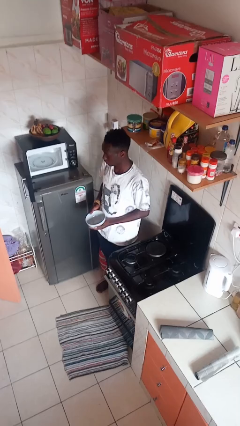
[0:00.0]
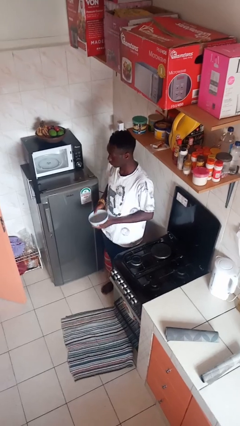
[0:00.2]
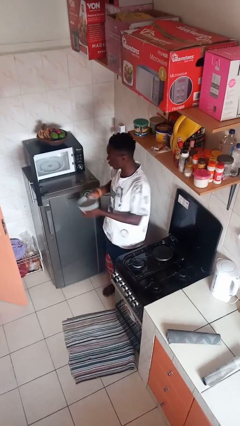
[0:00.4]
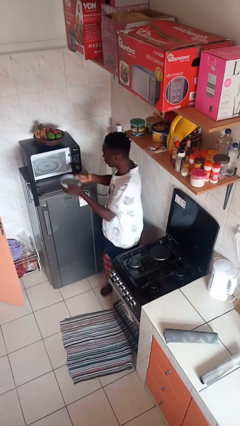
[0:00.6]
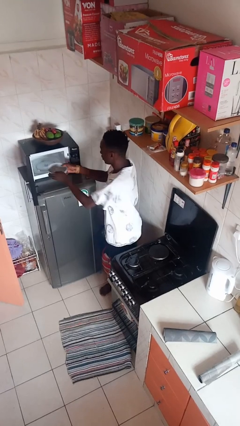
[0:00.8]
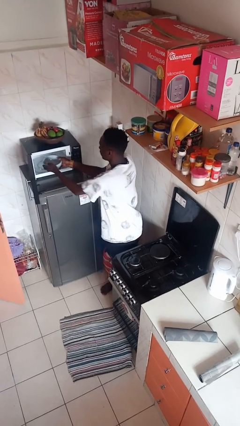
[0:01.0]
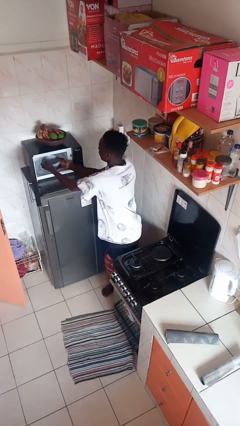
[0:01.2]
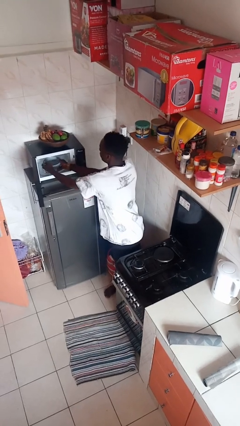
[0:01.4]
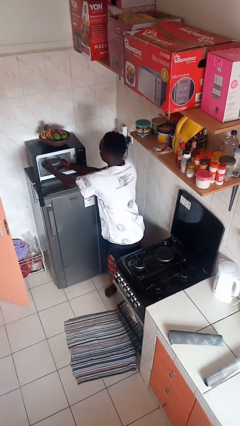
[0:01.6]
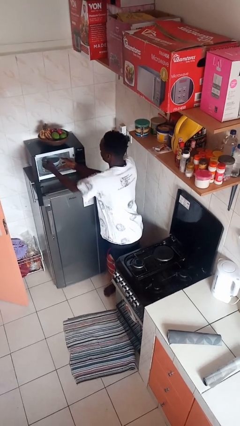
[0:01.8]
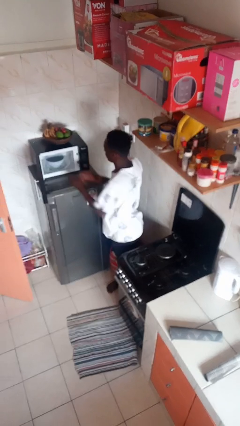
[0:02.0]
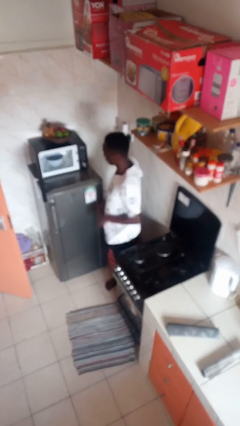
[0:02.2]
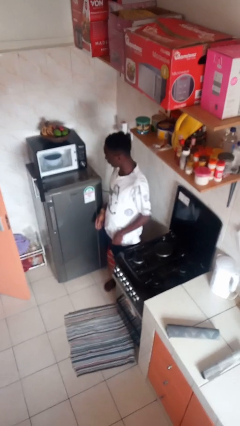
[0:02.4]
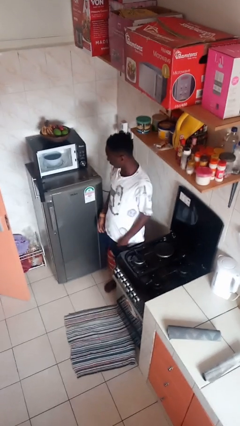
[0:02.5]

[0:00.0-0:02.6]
person puts object into microwave

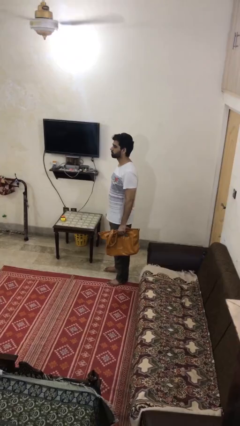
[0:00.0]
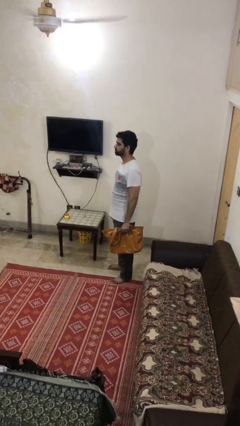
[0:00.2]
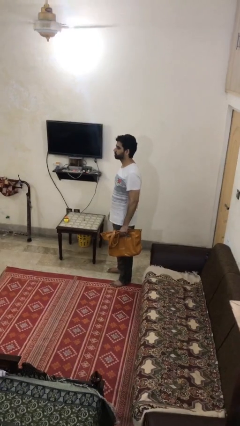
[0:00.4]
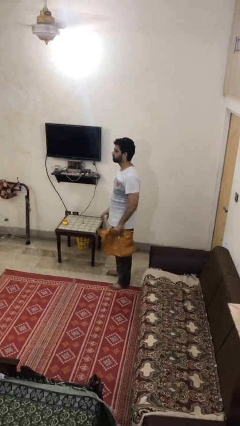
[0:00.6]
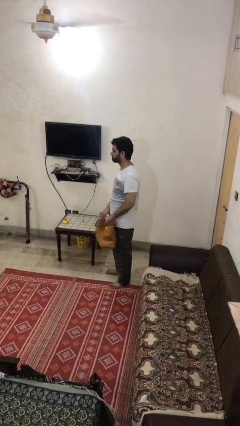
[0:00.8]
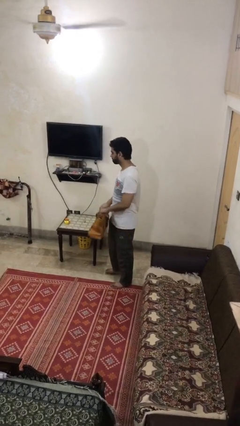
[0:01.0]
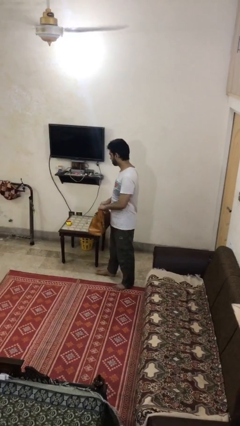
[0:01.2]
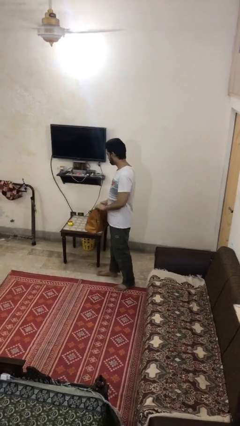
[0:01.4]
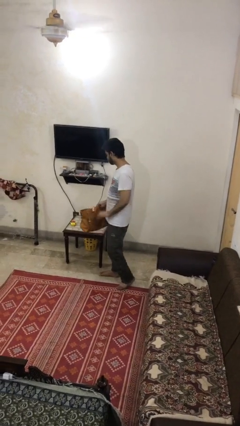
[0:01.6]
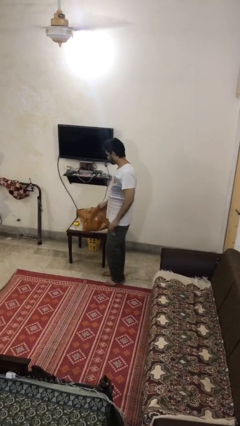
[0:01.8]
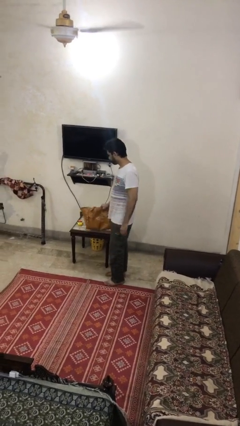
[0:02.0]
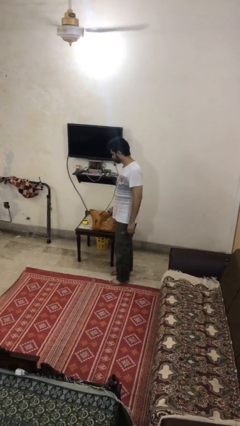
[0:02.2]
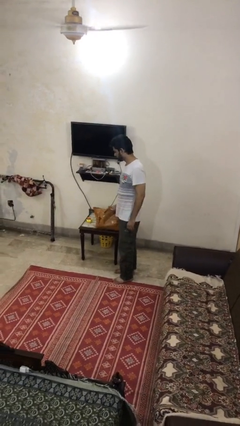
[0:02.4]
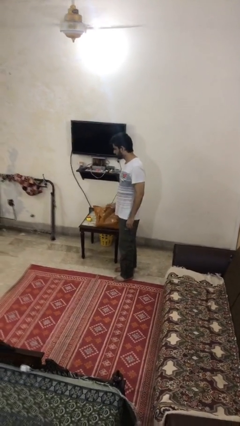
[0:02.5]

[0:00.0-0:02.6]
person puts down object on table

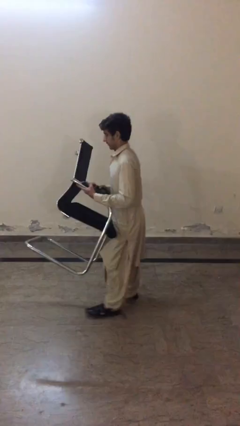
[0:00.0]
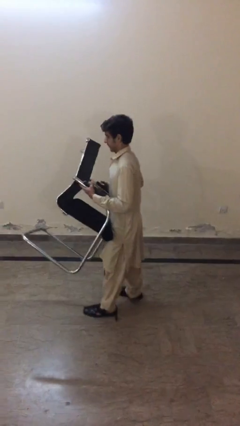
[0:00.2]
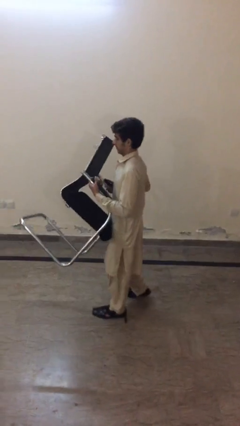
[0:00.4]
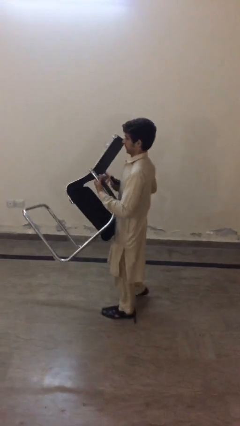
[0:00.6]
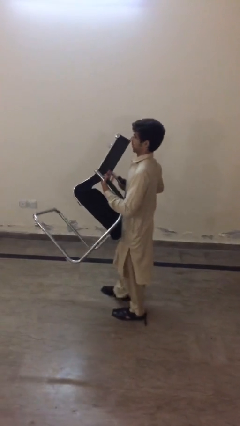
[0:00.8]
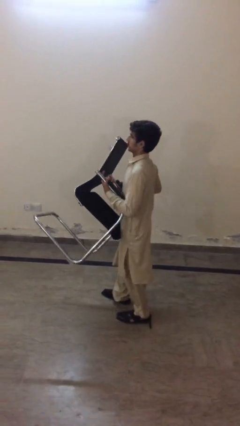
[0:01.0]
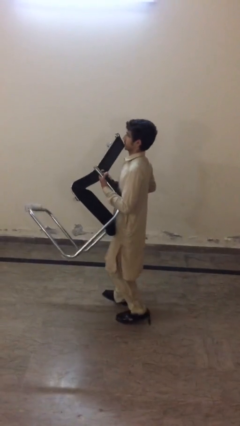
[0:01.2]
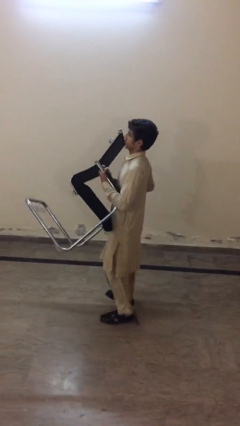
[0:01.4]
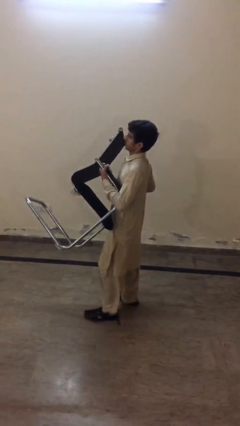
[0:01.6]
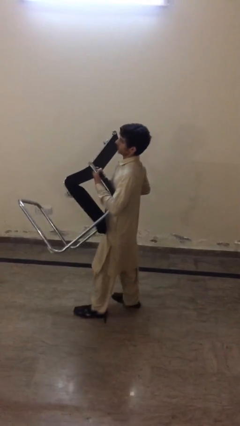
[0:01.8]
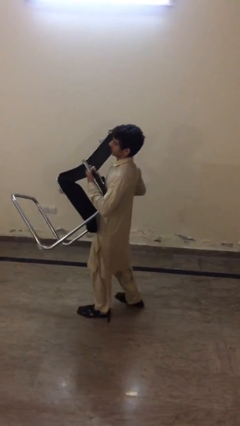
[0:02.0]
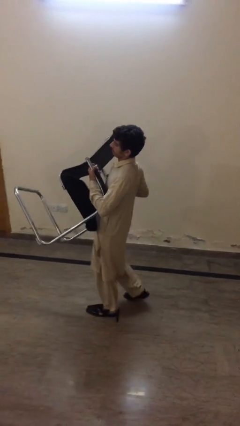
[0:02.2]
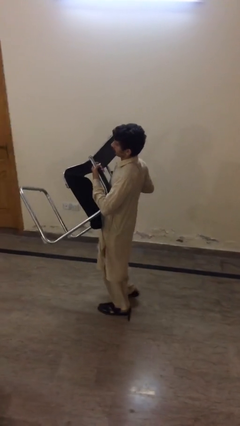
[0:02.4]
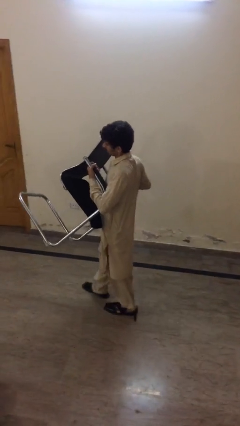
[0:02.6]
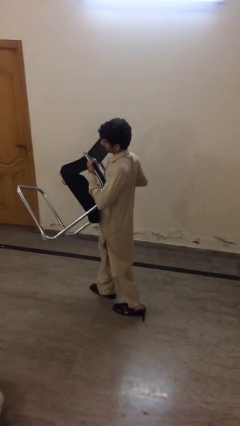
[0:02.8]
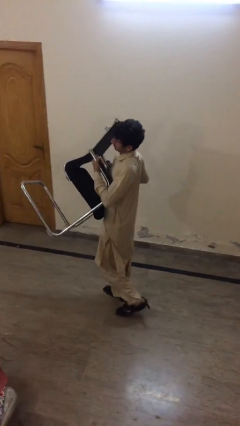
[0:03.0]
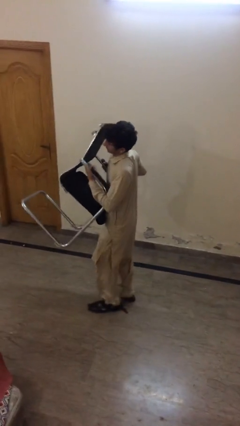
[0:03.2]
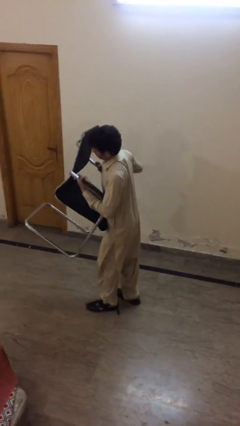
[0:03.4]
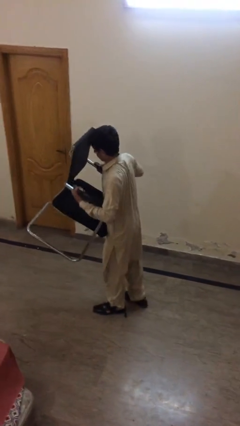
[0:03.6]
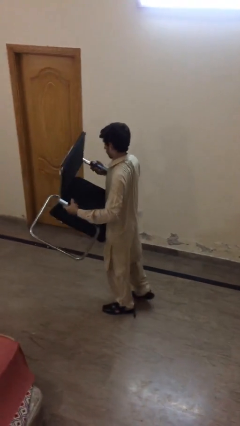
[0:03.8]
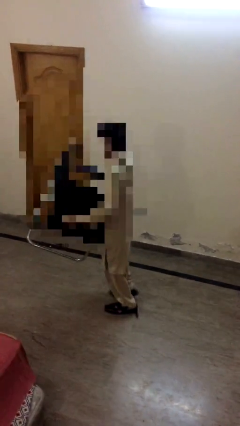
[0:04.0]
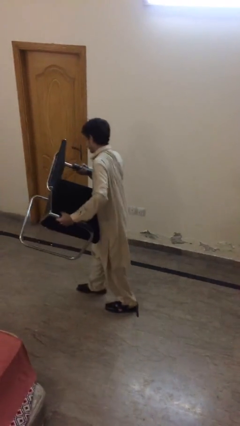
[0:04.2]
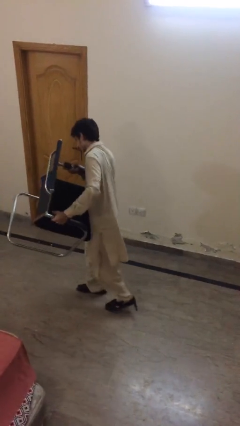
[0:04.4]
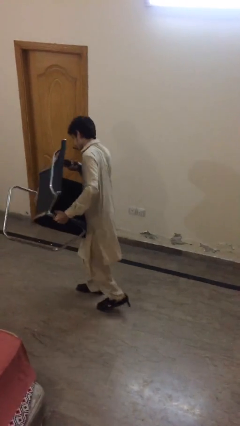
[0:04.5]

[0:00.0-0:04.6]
person carries heavy object

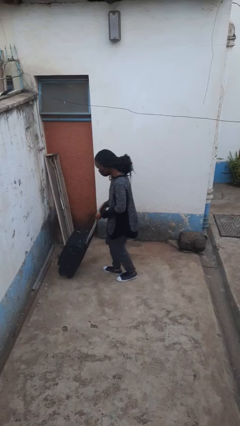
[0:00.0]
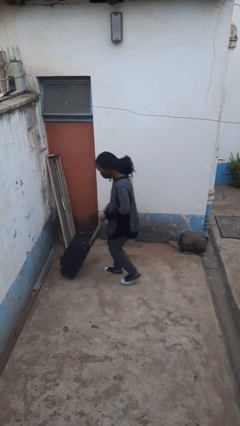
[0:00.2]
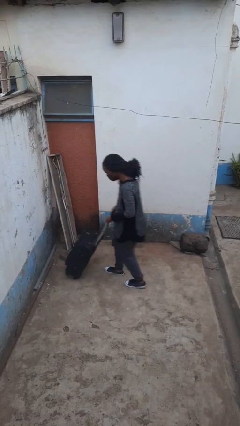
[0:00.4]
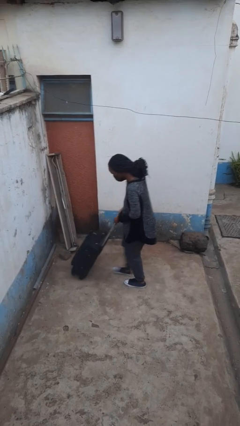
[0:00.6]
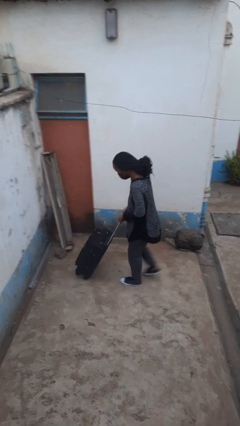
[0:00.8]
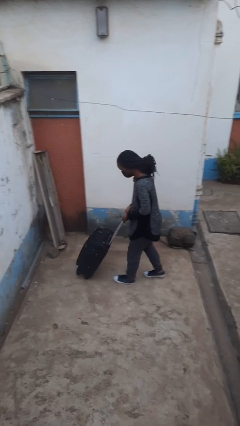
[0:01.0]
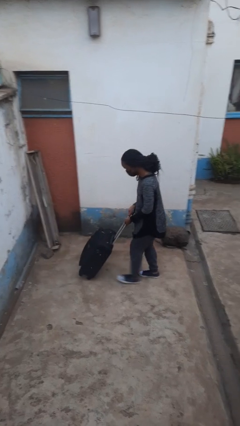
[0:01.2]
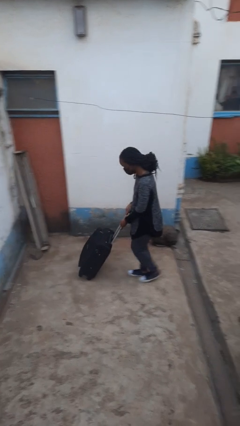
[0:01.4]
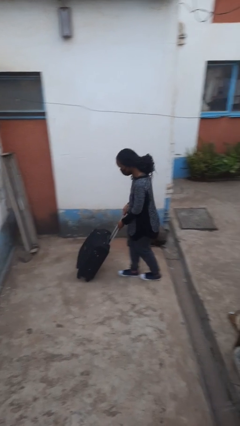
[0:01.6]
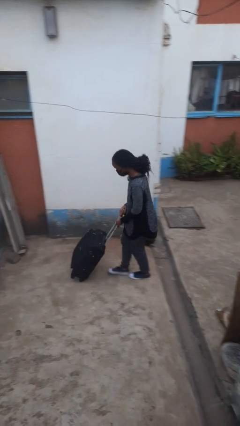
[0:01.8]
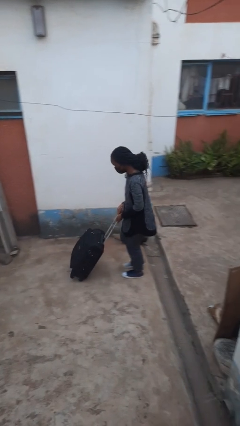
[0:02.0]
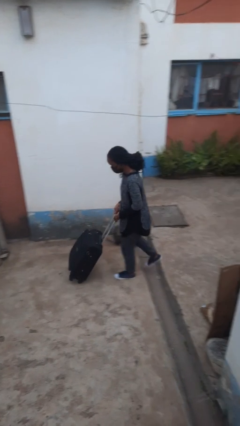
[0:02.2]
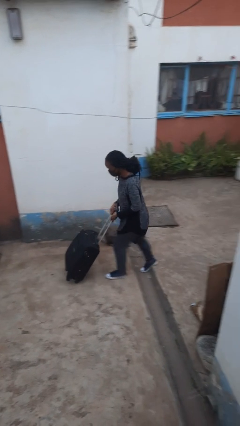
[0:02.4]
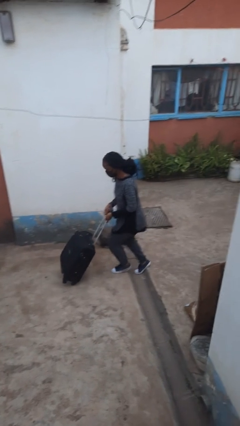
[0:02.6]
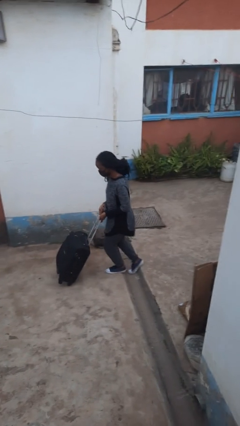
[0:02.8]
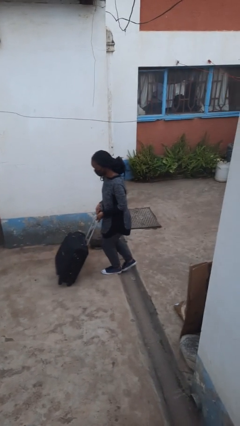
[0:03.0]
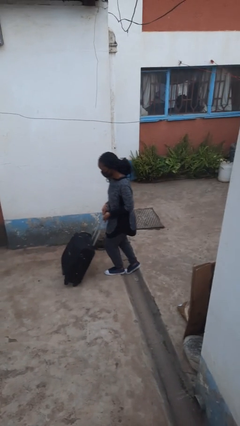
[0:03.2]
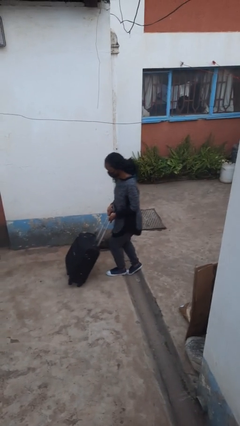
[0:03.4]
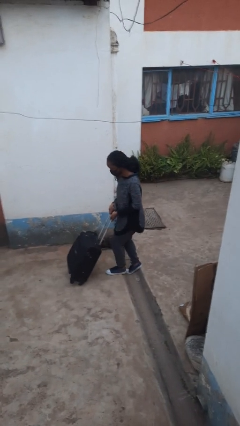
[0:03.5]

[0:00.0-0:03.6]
person pulls wheeled cart

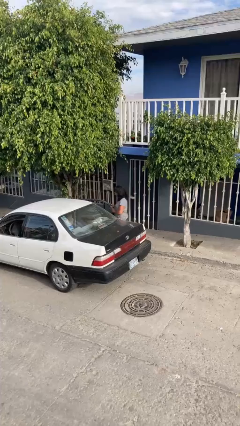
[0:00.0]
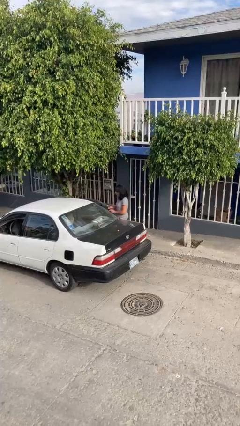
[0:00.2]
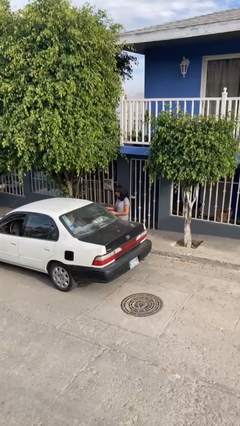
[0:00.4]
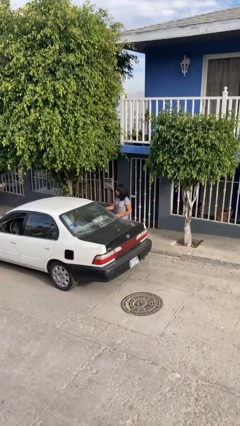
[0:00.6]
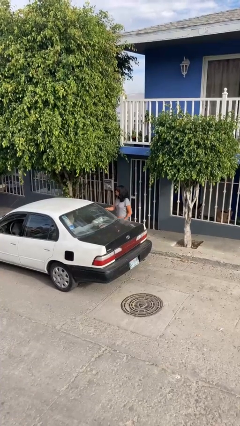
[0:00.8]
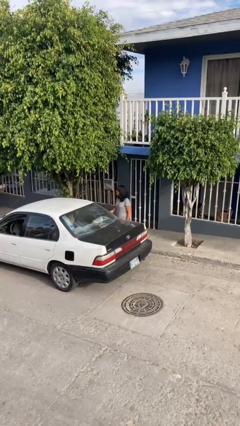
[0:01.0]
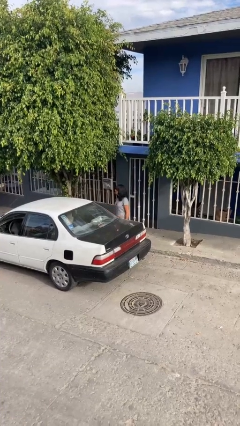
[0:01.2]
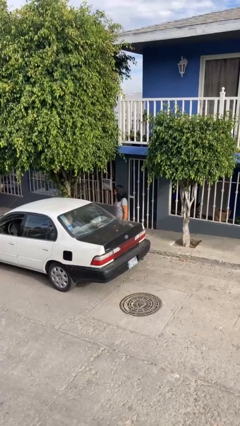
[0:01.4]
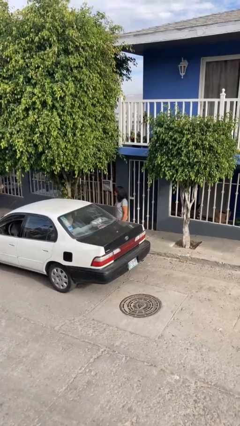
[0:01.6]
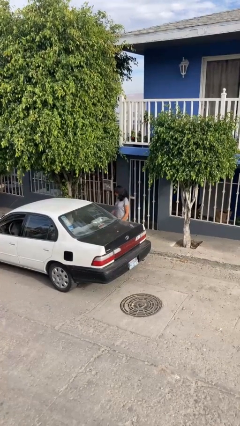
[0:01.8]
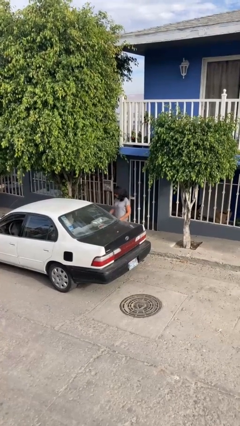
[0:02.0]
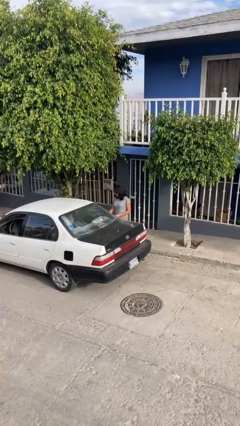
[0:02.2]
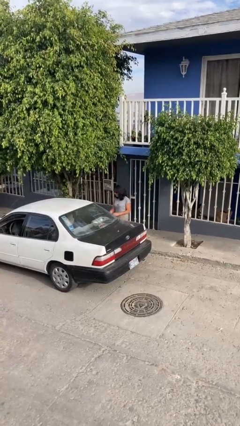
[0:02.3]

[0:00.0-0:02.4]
person closes car door

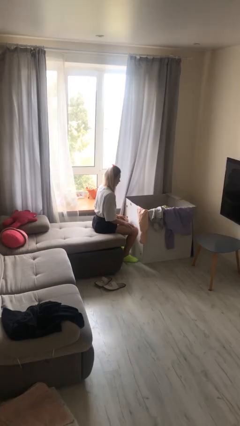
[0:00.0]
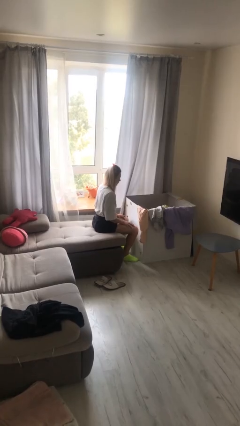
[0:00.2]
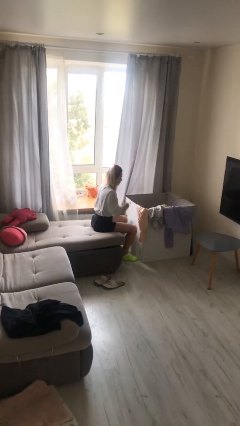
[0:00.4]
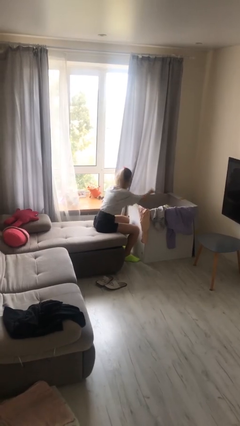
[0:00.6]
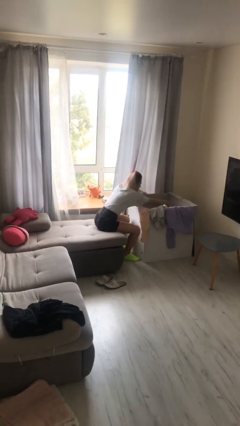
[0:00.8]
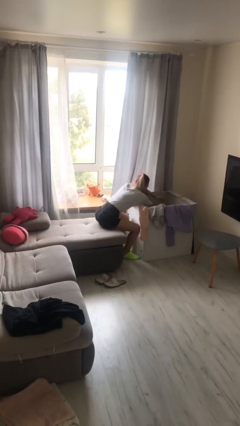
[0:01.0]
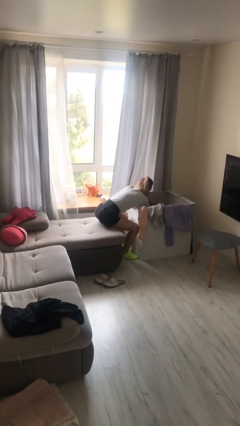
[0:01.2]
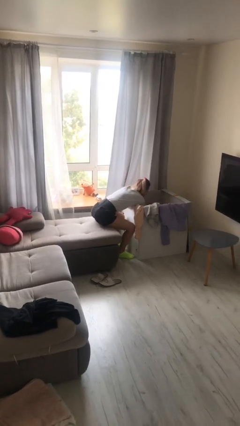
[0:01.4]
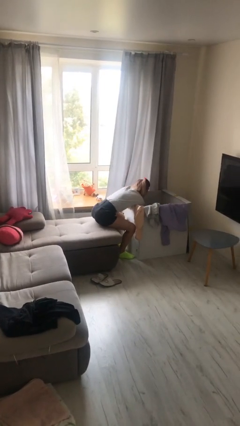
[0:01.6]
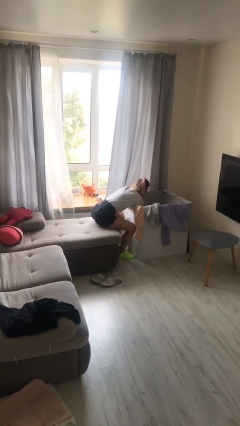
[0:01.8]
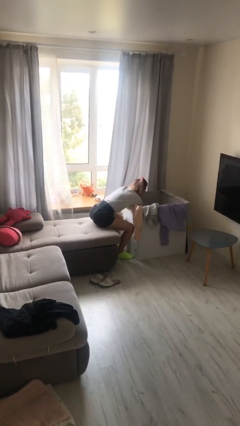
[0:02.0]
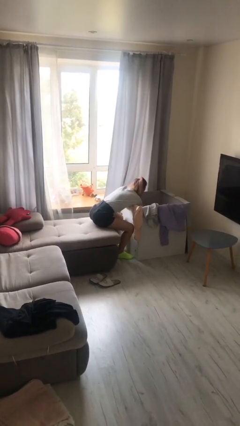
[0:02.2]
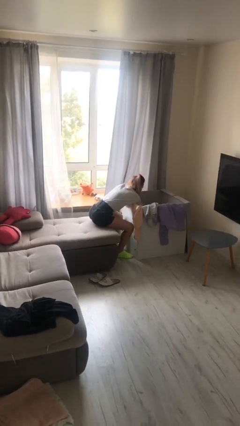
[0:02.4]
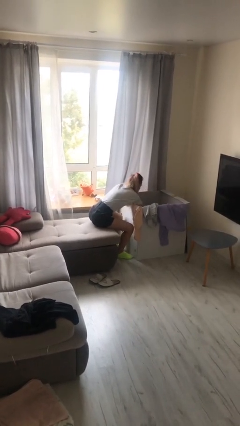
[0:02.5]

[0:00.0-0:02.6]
person searches in box
